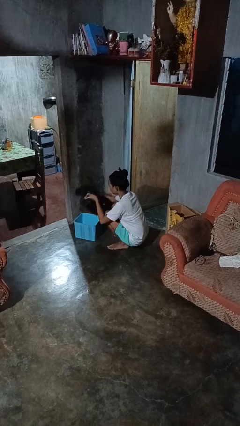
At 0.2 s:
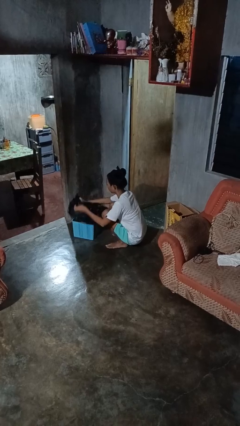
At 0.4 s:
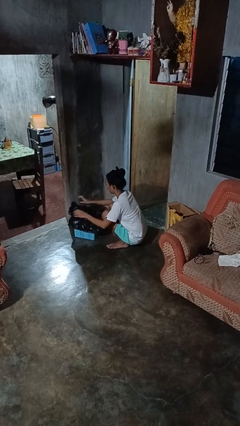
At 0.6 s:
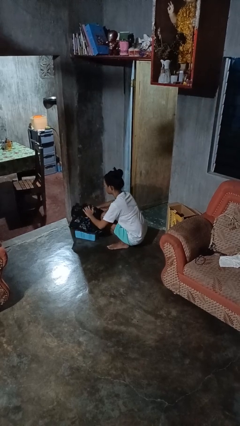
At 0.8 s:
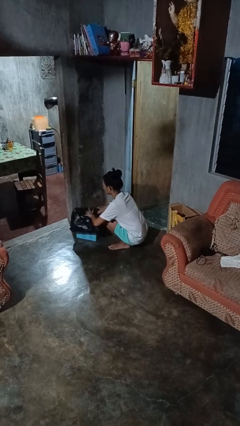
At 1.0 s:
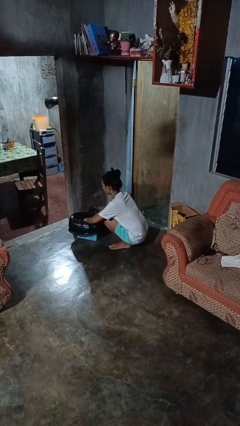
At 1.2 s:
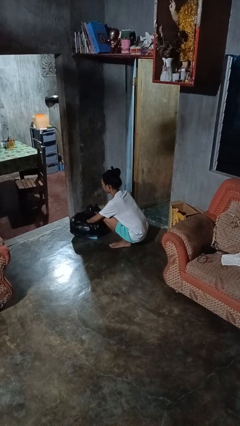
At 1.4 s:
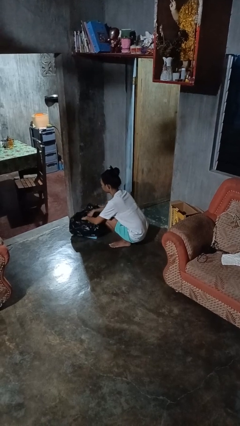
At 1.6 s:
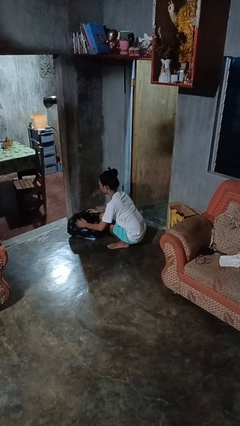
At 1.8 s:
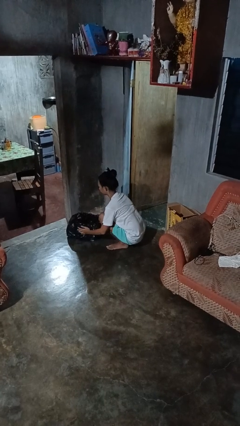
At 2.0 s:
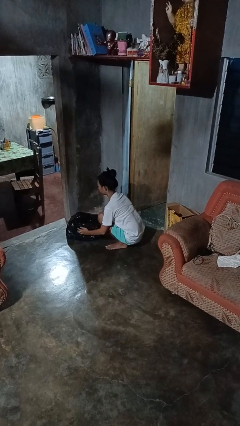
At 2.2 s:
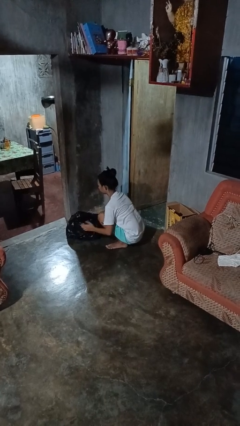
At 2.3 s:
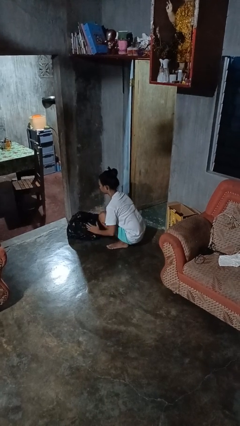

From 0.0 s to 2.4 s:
person inserts trashbag into trashcan

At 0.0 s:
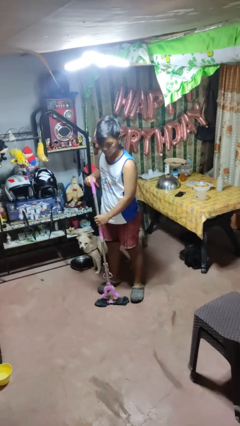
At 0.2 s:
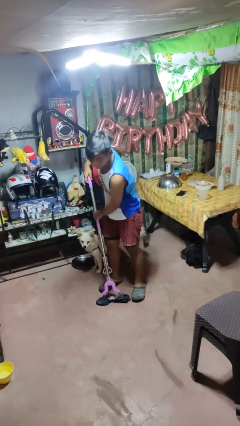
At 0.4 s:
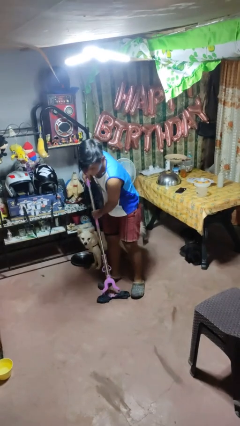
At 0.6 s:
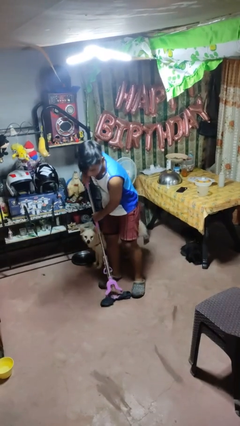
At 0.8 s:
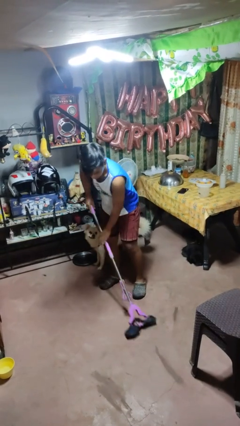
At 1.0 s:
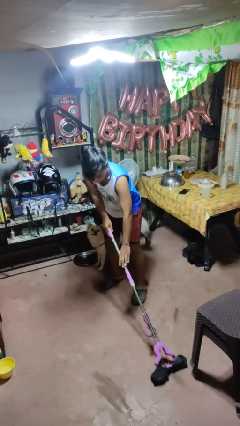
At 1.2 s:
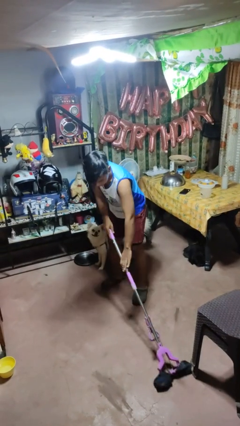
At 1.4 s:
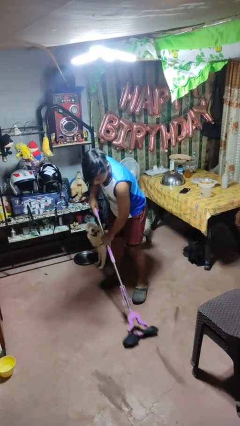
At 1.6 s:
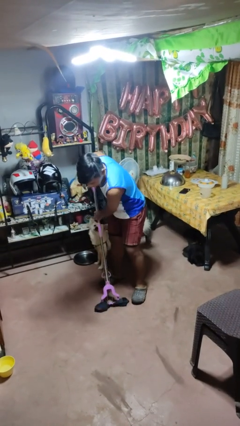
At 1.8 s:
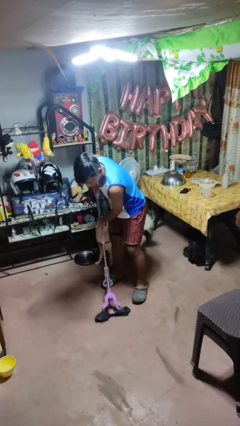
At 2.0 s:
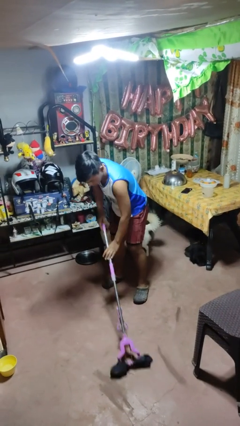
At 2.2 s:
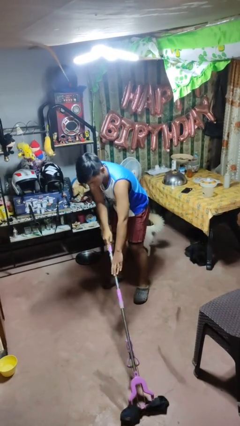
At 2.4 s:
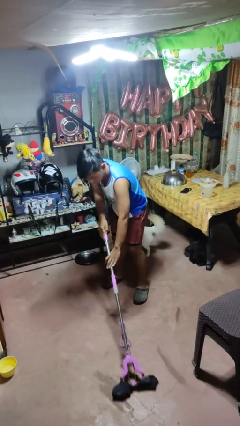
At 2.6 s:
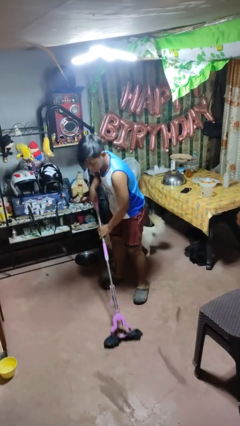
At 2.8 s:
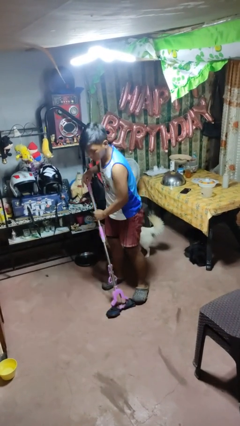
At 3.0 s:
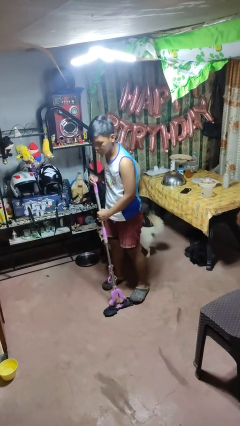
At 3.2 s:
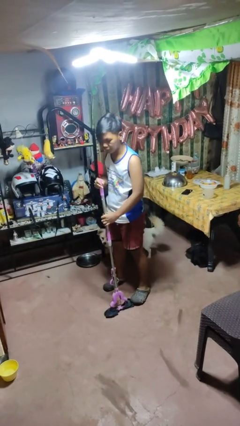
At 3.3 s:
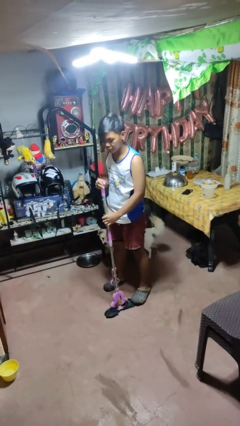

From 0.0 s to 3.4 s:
person mops

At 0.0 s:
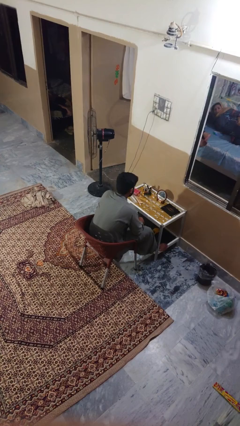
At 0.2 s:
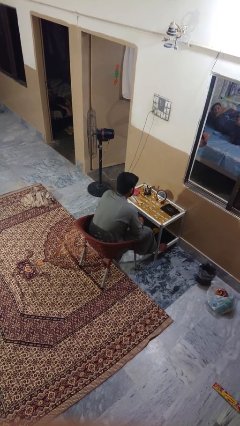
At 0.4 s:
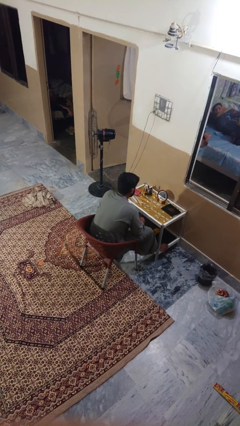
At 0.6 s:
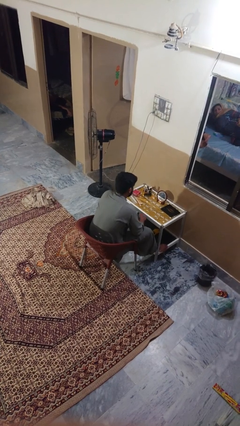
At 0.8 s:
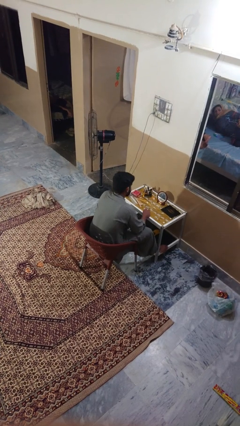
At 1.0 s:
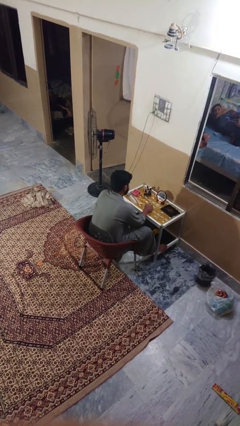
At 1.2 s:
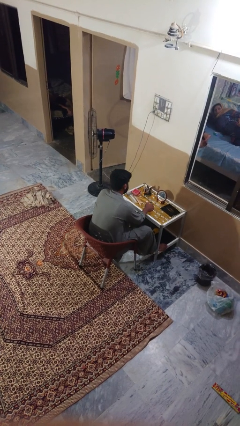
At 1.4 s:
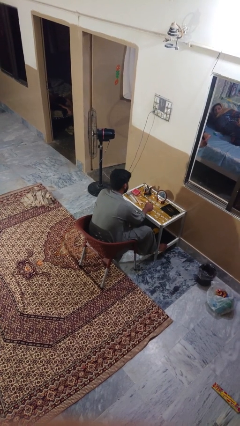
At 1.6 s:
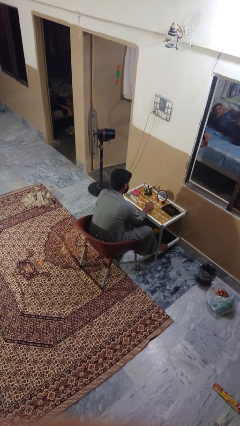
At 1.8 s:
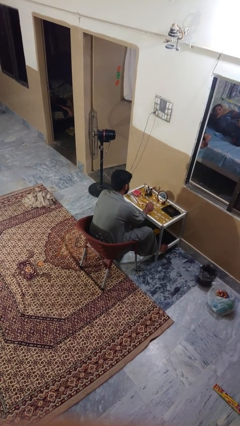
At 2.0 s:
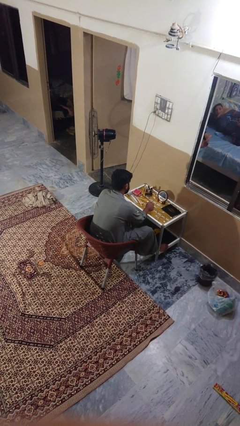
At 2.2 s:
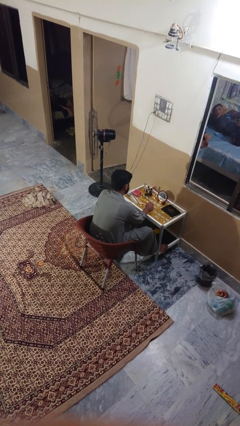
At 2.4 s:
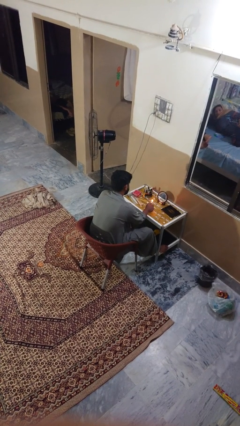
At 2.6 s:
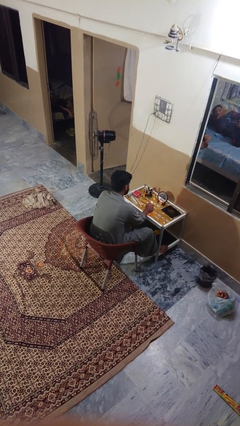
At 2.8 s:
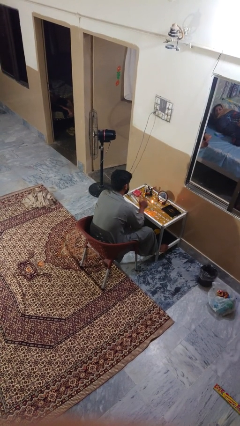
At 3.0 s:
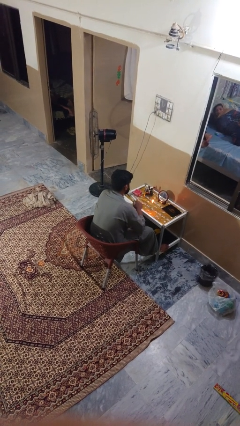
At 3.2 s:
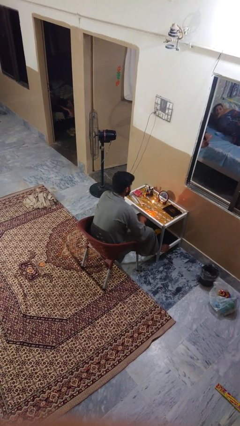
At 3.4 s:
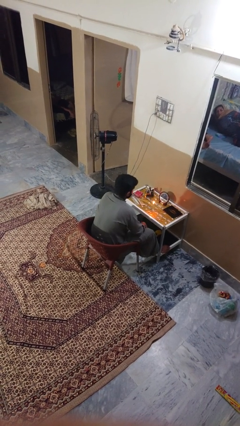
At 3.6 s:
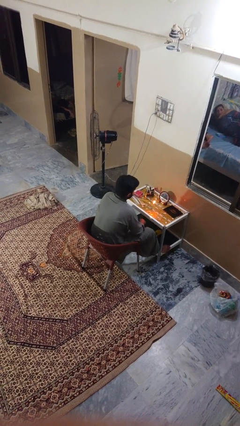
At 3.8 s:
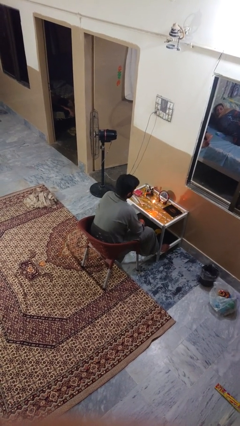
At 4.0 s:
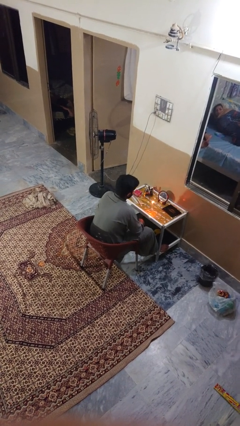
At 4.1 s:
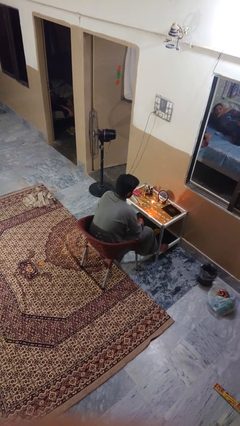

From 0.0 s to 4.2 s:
person lights candle

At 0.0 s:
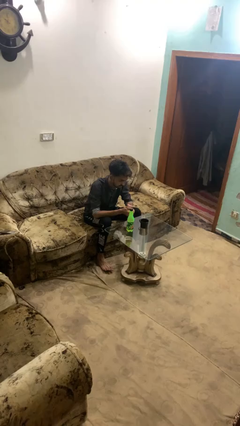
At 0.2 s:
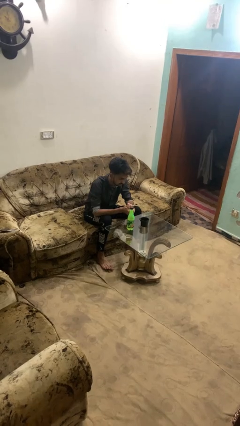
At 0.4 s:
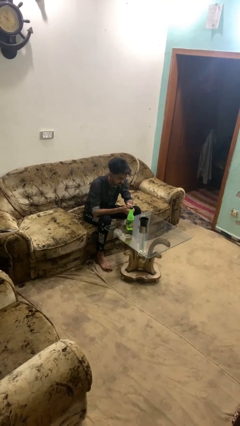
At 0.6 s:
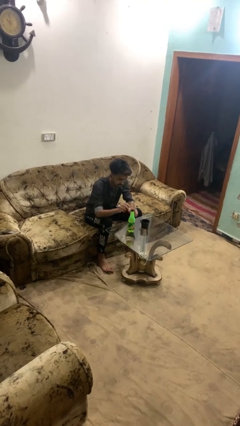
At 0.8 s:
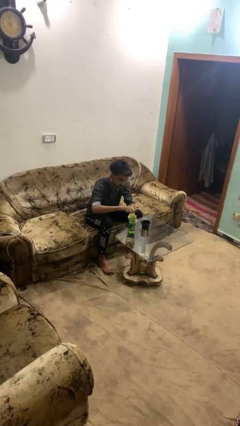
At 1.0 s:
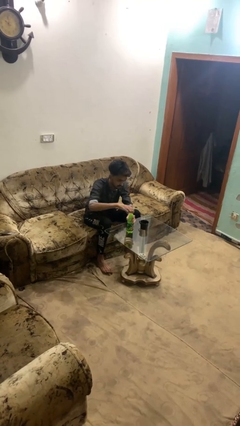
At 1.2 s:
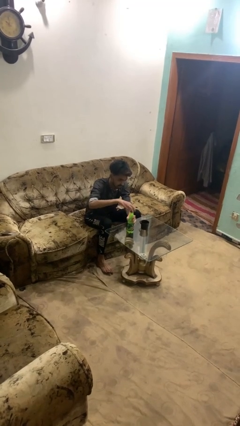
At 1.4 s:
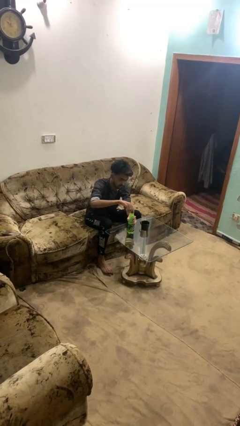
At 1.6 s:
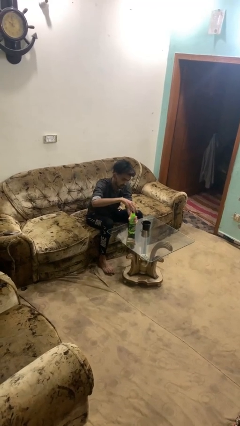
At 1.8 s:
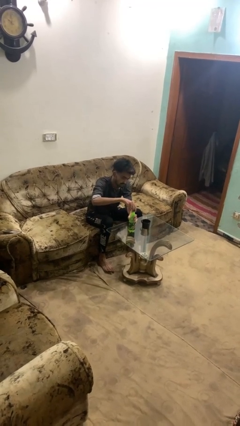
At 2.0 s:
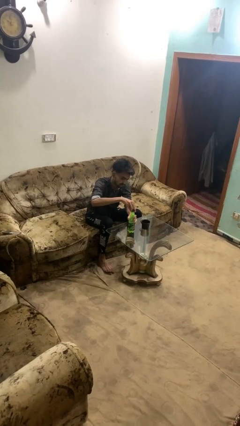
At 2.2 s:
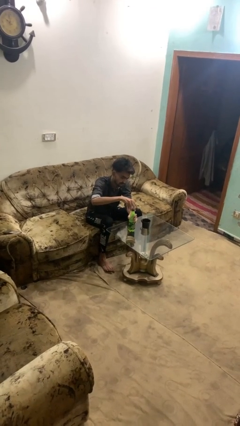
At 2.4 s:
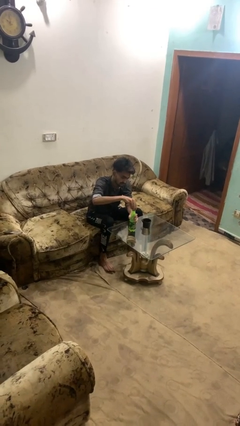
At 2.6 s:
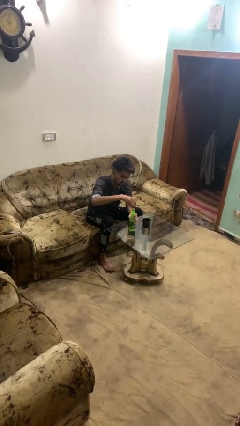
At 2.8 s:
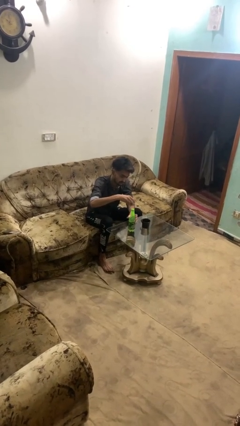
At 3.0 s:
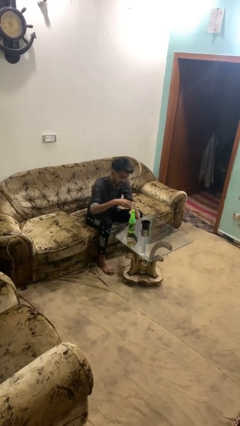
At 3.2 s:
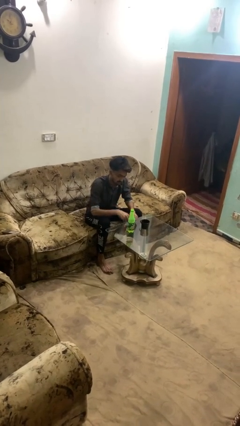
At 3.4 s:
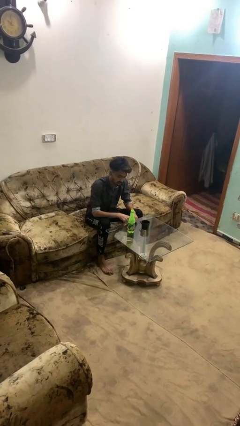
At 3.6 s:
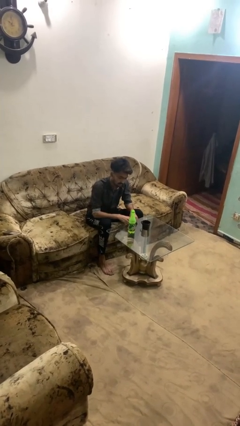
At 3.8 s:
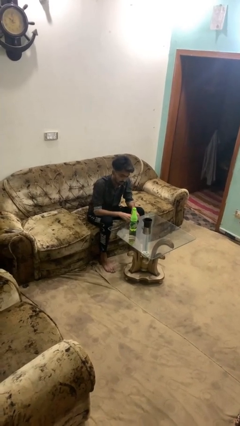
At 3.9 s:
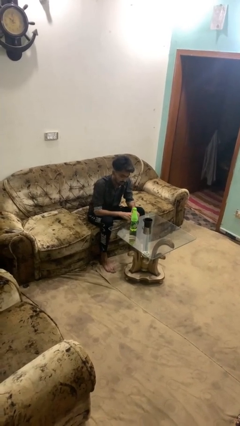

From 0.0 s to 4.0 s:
person unscrews lid from bottle

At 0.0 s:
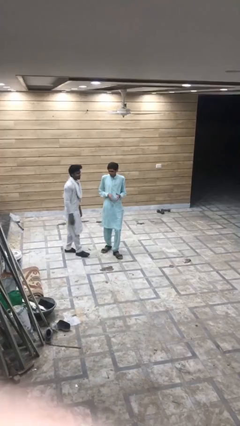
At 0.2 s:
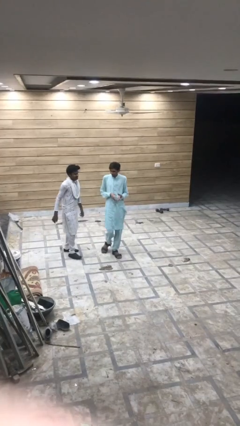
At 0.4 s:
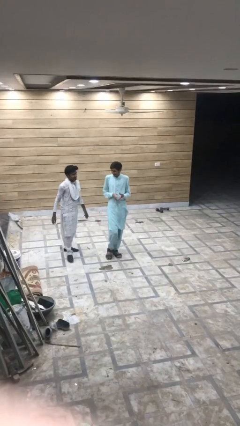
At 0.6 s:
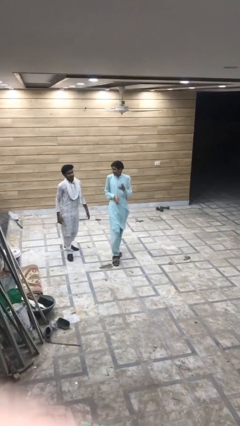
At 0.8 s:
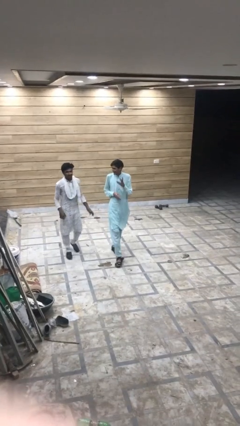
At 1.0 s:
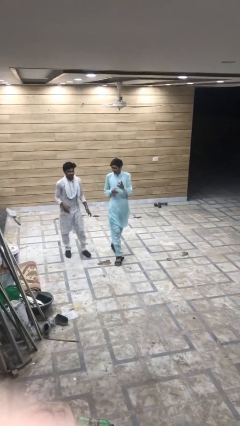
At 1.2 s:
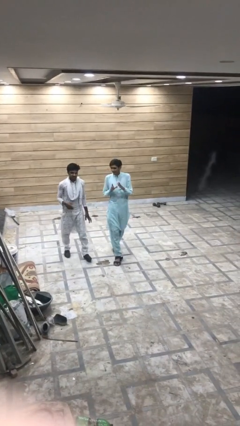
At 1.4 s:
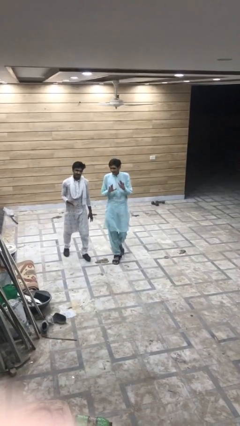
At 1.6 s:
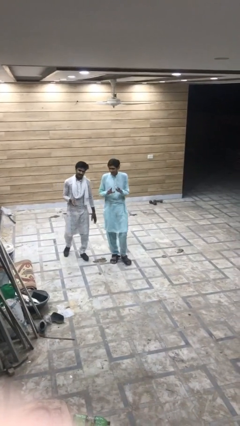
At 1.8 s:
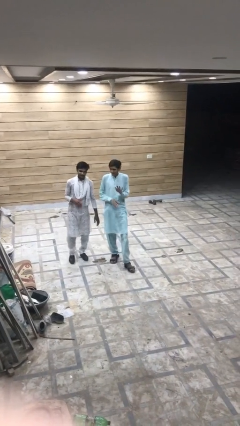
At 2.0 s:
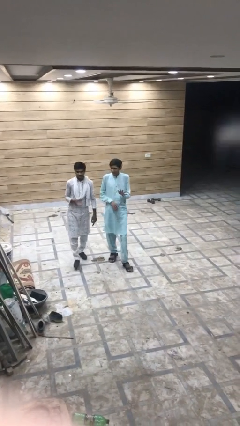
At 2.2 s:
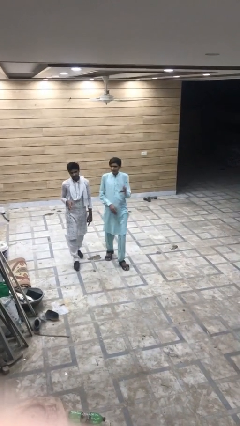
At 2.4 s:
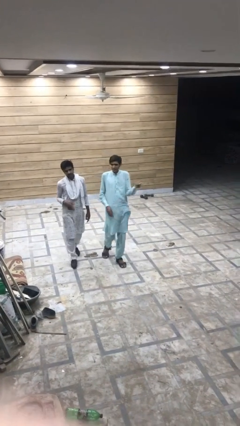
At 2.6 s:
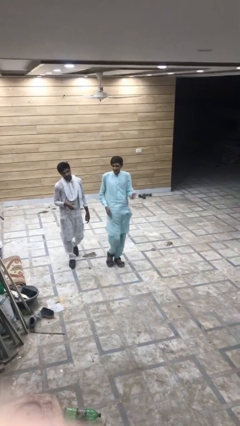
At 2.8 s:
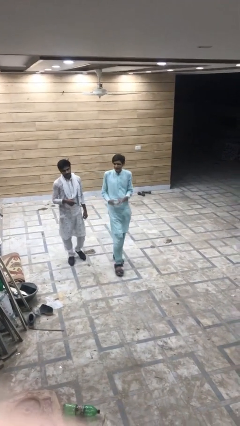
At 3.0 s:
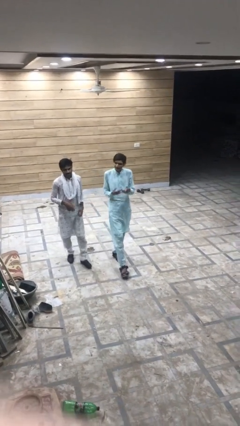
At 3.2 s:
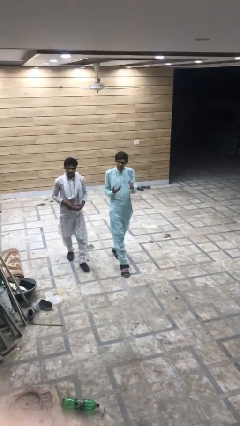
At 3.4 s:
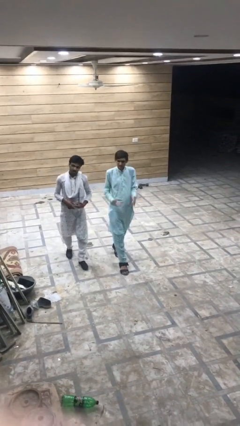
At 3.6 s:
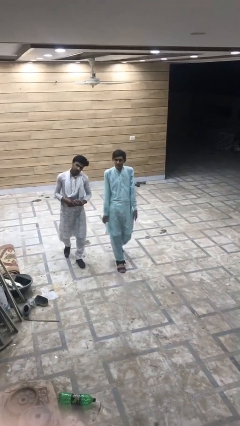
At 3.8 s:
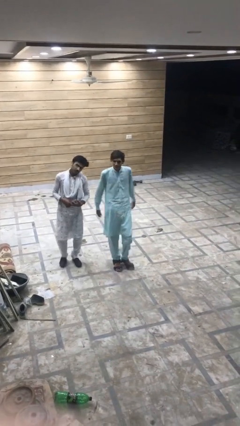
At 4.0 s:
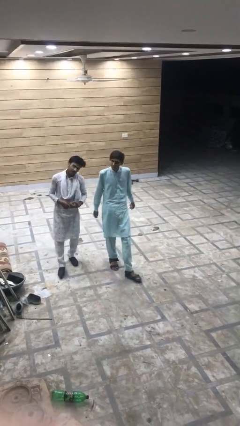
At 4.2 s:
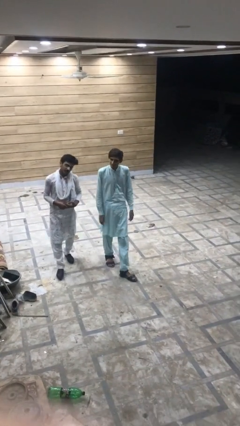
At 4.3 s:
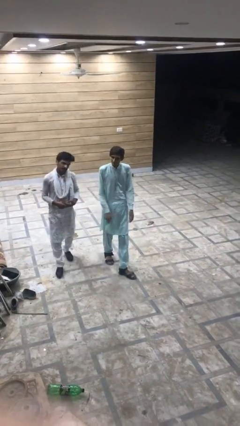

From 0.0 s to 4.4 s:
person talks to person
